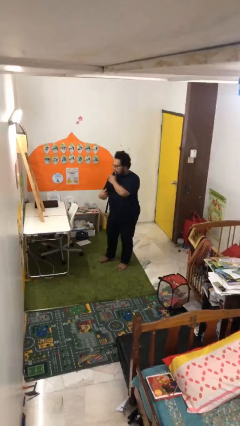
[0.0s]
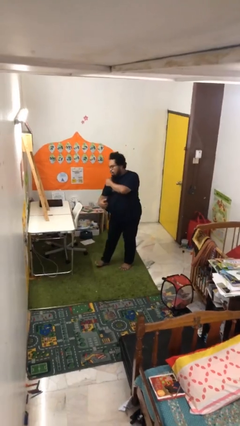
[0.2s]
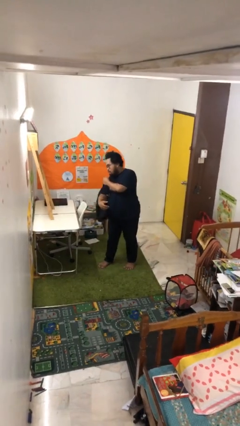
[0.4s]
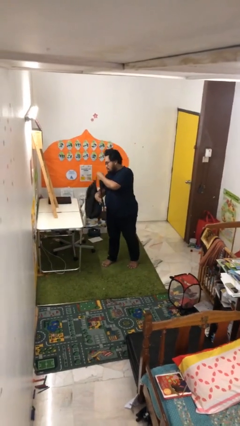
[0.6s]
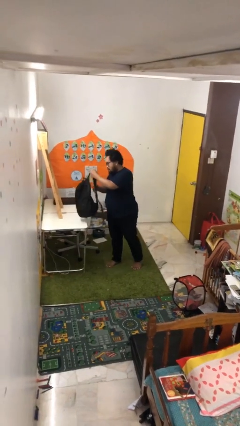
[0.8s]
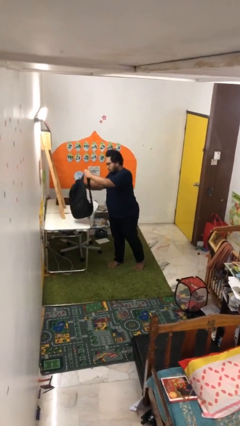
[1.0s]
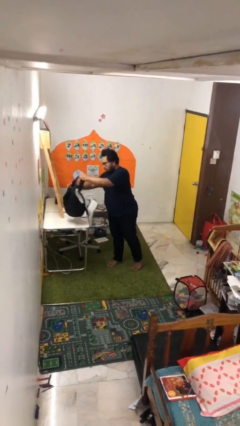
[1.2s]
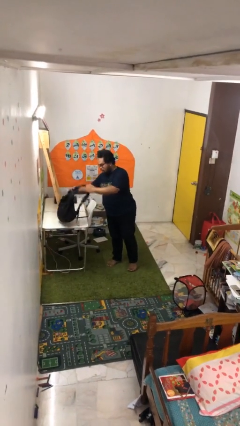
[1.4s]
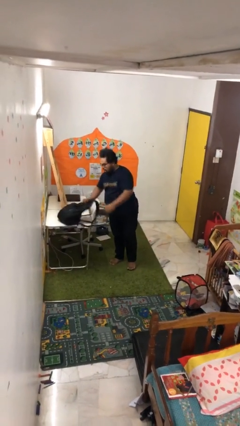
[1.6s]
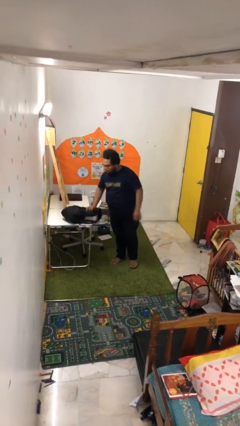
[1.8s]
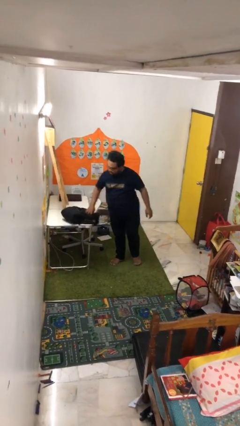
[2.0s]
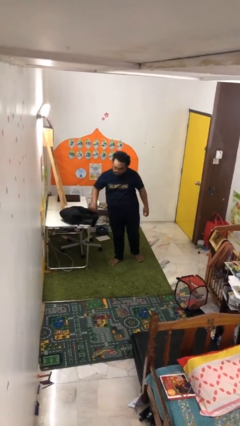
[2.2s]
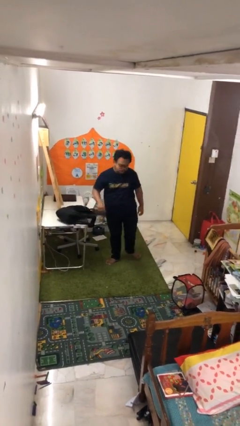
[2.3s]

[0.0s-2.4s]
person puts down object on table

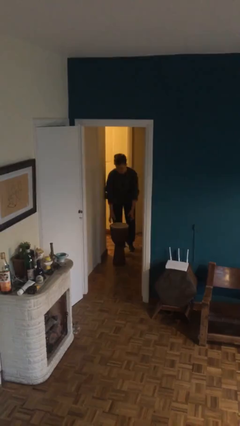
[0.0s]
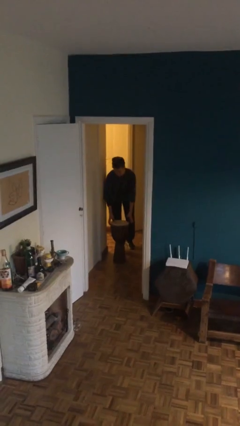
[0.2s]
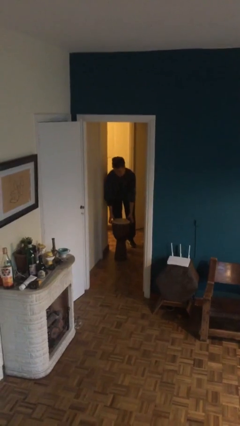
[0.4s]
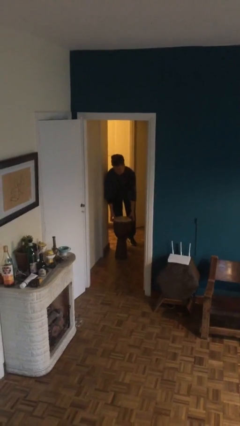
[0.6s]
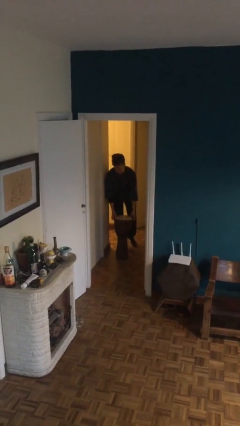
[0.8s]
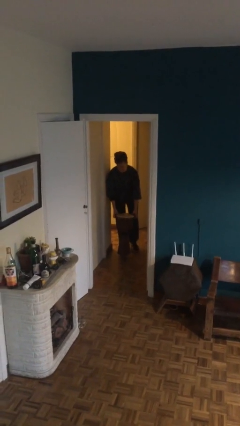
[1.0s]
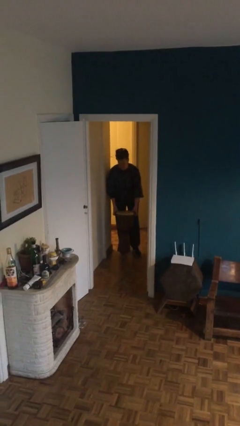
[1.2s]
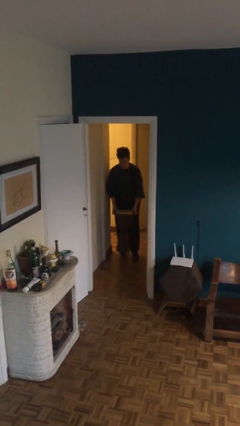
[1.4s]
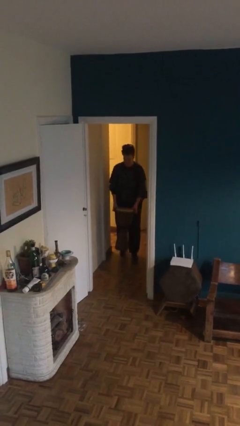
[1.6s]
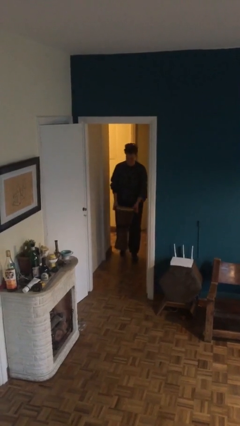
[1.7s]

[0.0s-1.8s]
person picks up object from floor

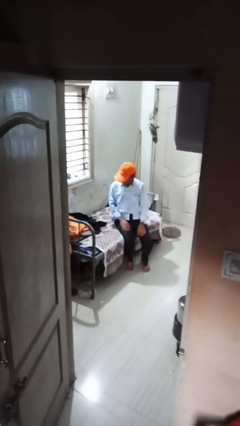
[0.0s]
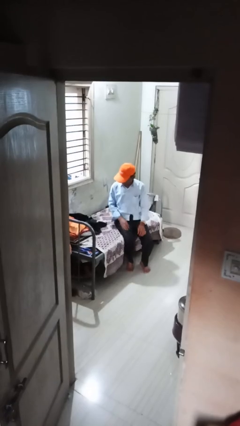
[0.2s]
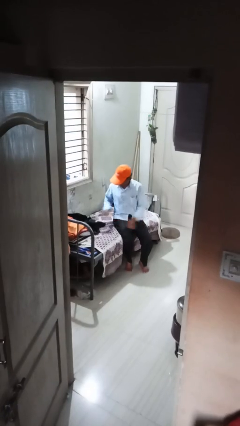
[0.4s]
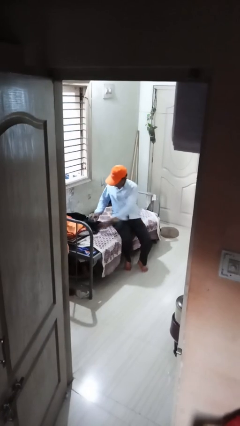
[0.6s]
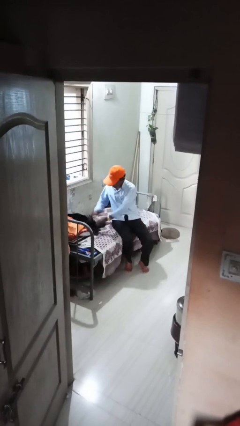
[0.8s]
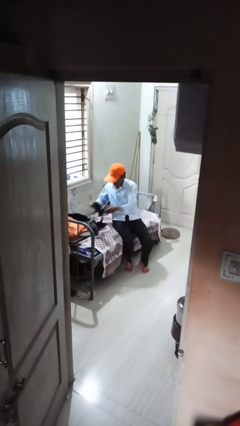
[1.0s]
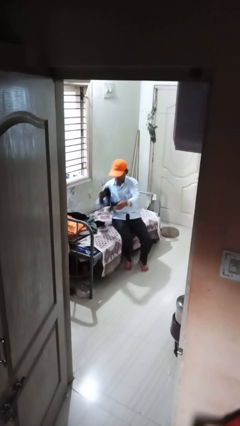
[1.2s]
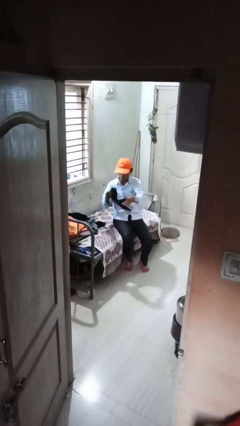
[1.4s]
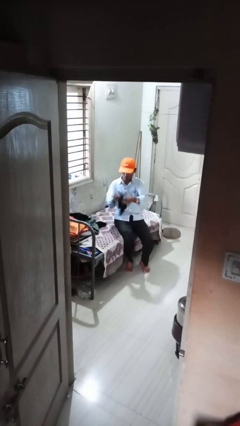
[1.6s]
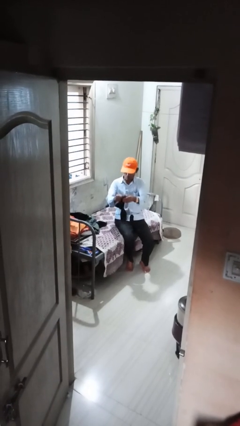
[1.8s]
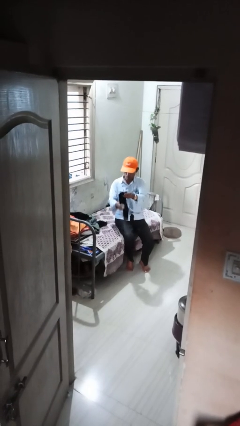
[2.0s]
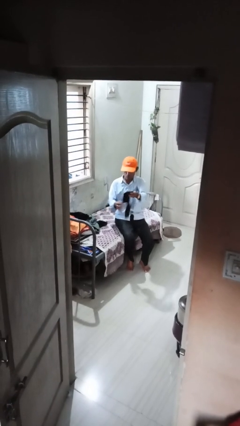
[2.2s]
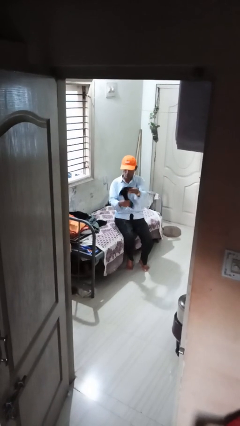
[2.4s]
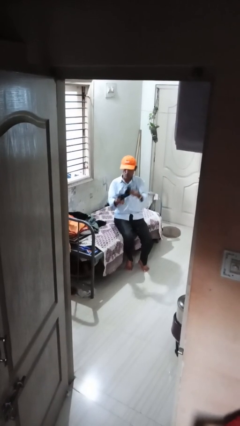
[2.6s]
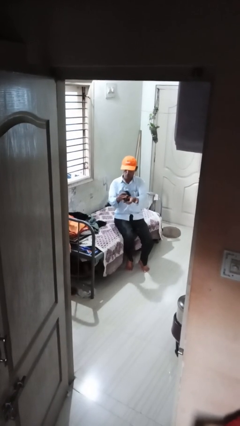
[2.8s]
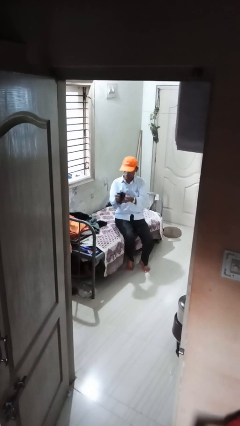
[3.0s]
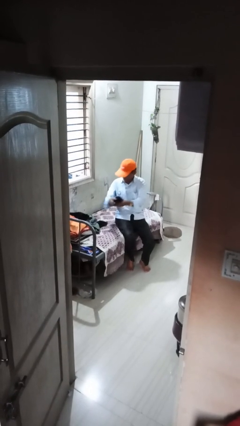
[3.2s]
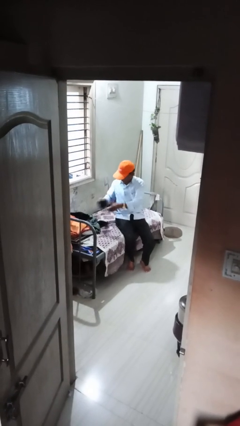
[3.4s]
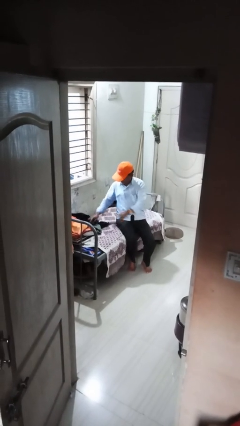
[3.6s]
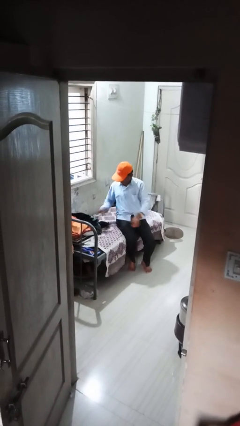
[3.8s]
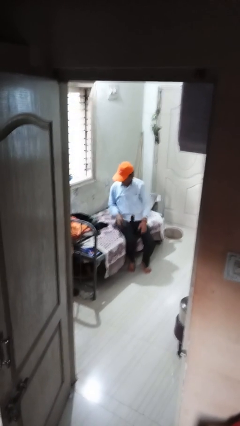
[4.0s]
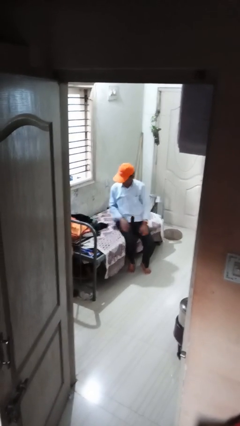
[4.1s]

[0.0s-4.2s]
person folds socks

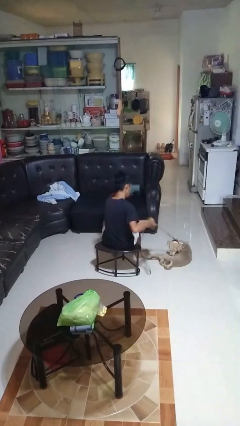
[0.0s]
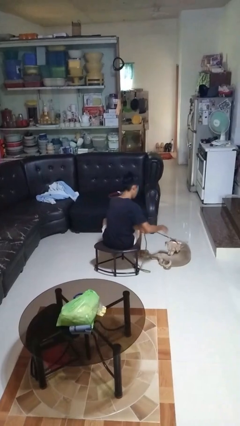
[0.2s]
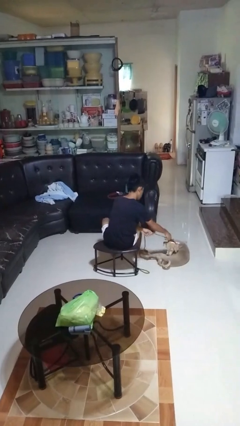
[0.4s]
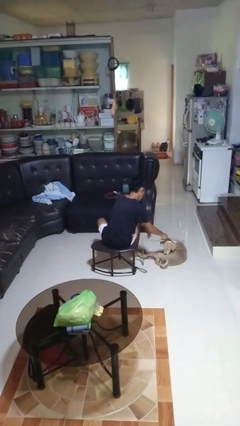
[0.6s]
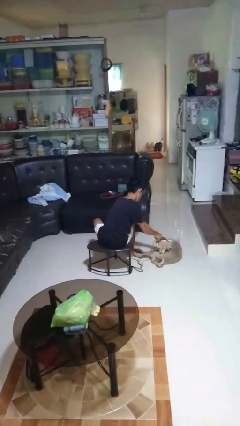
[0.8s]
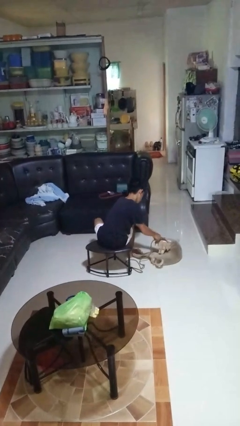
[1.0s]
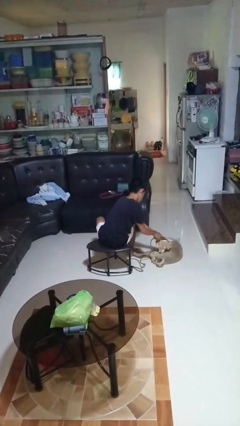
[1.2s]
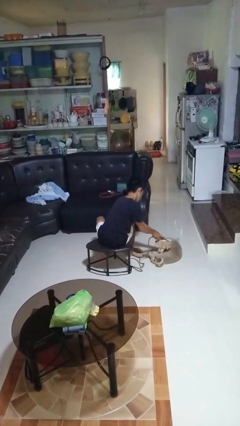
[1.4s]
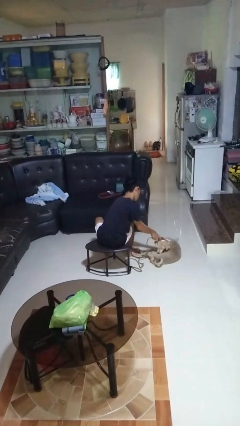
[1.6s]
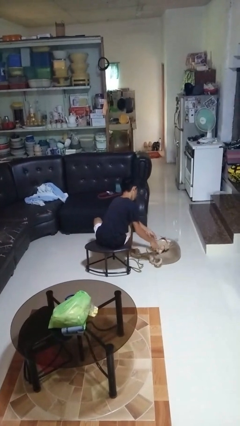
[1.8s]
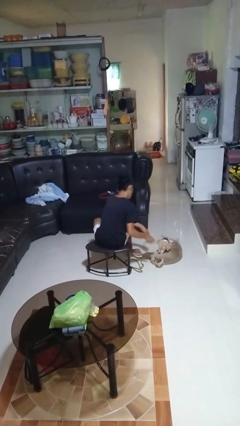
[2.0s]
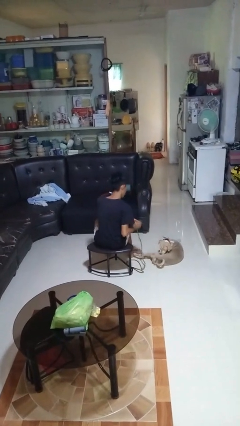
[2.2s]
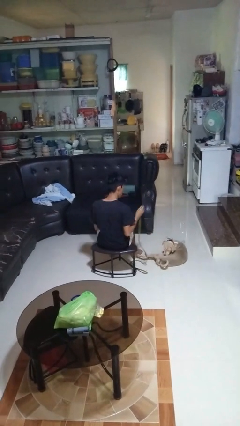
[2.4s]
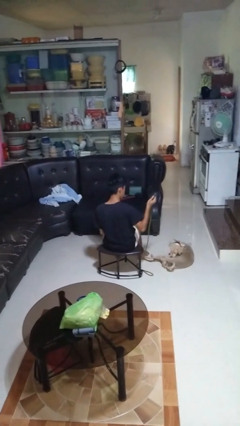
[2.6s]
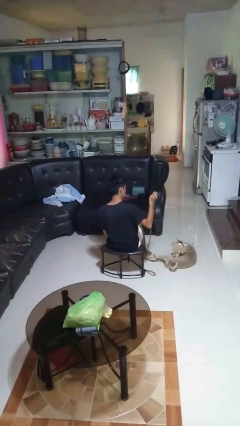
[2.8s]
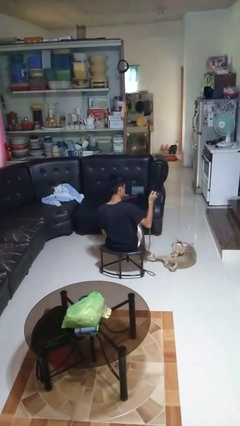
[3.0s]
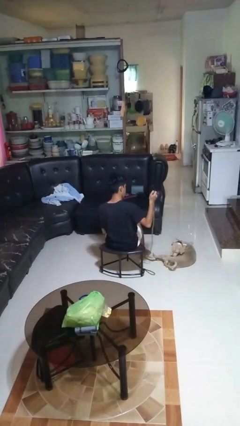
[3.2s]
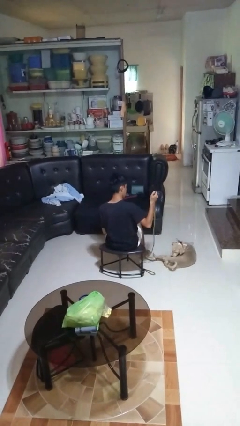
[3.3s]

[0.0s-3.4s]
person unattaches leash from dog

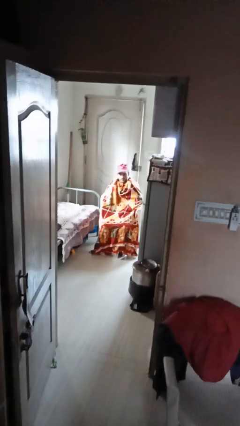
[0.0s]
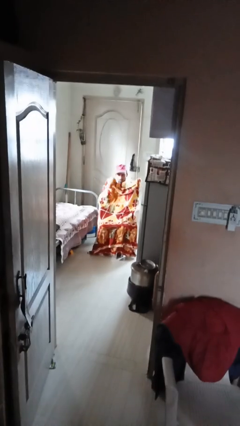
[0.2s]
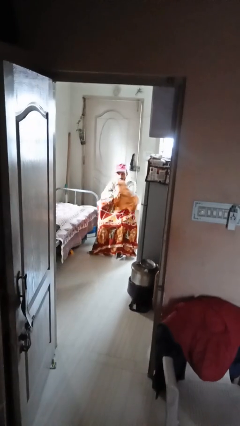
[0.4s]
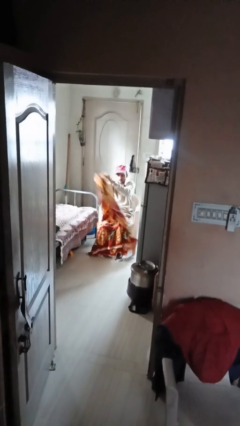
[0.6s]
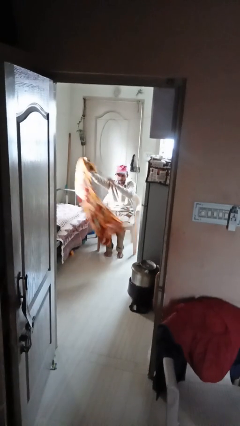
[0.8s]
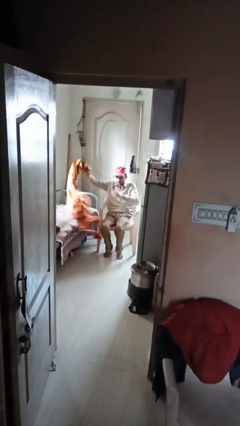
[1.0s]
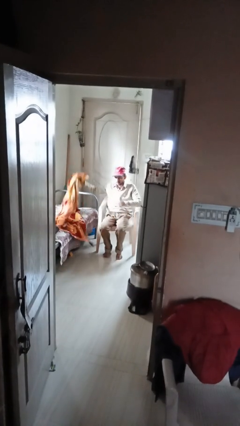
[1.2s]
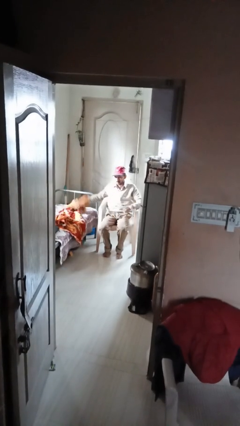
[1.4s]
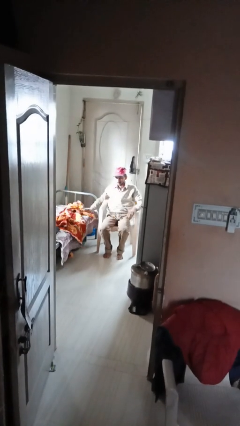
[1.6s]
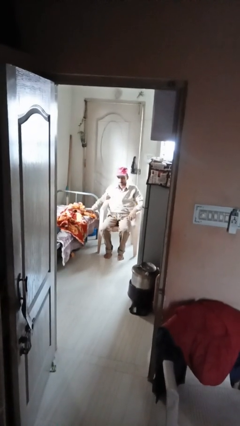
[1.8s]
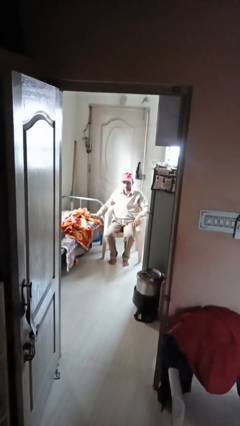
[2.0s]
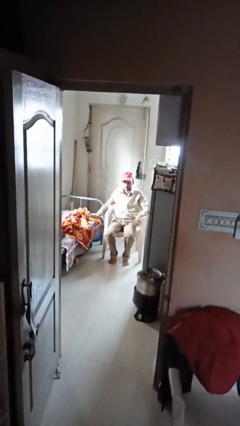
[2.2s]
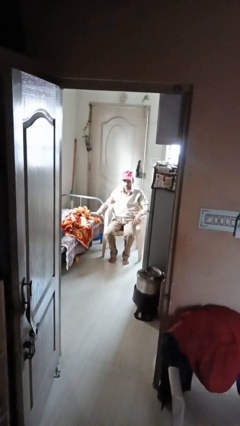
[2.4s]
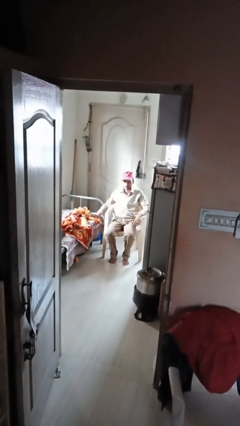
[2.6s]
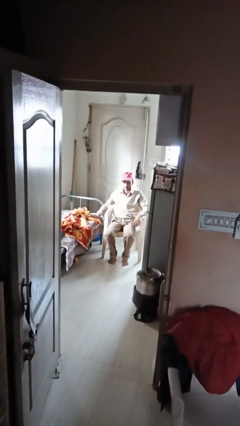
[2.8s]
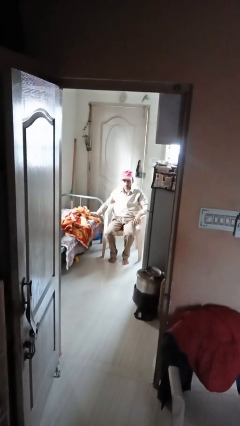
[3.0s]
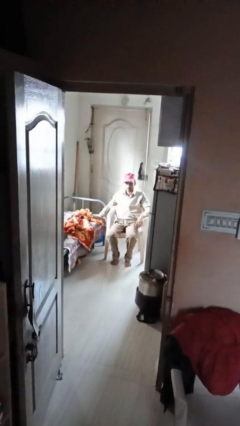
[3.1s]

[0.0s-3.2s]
person uncovers with blanket

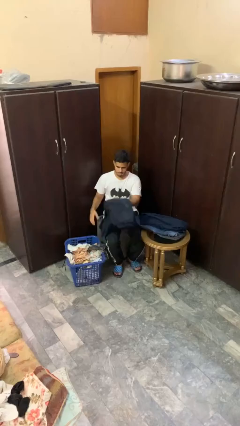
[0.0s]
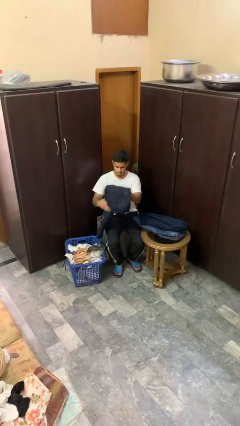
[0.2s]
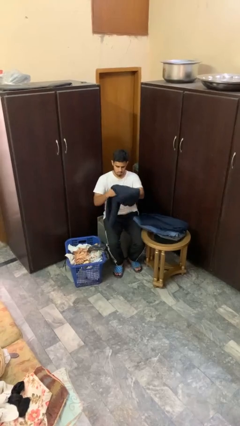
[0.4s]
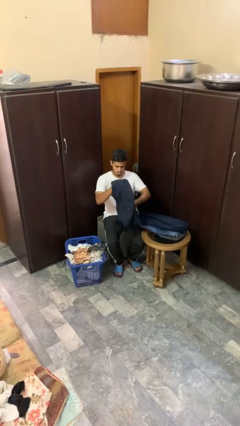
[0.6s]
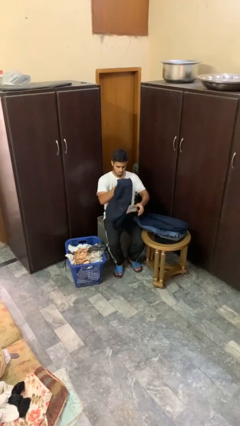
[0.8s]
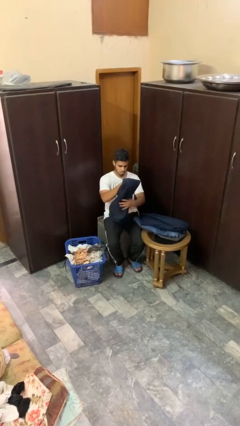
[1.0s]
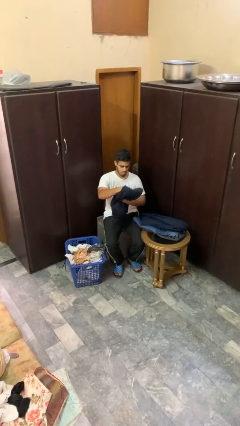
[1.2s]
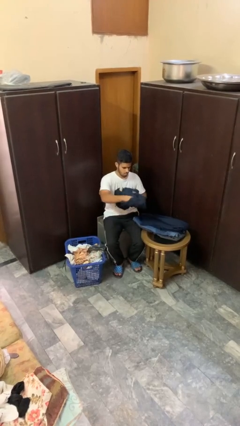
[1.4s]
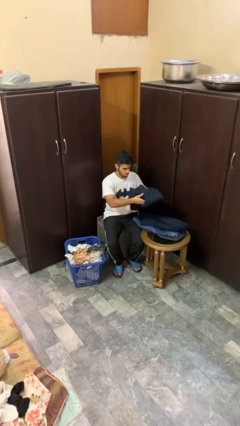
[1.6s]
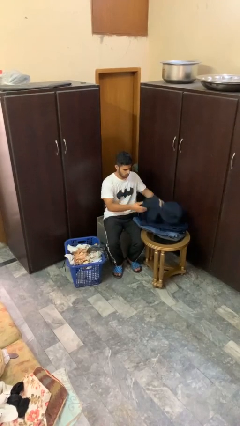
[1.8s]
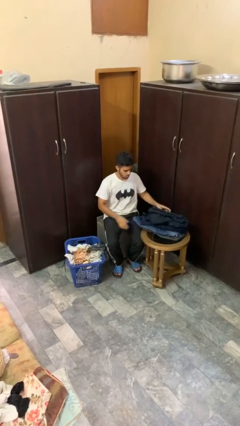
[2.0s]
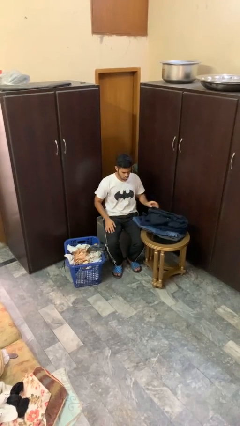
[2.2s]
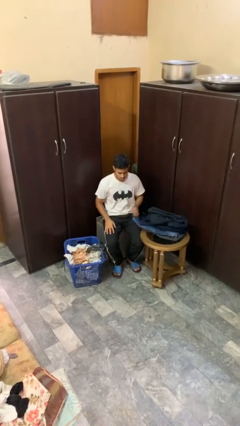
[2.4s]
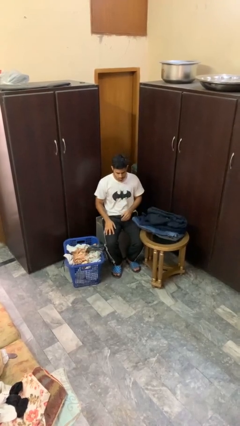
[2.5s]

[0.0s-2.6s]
person folds pants
